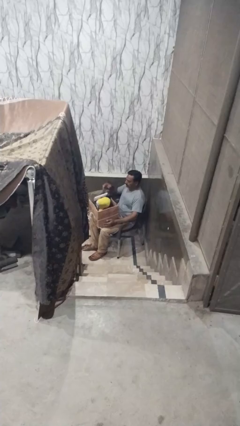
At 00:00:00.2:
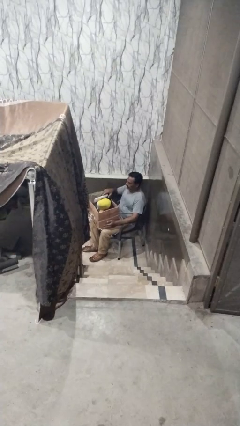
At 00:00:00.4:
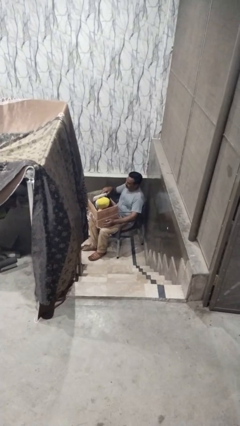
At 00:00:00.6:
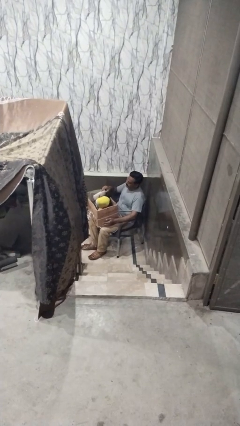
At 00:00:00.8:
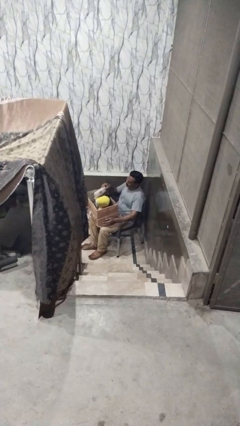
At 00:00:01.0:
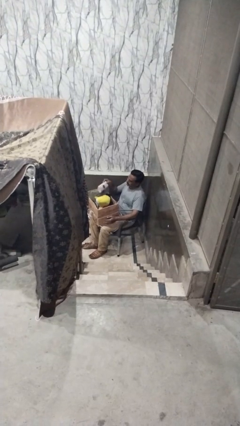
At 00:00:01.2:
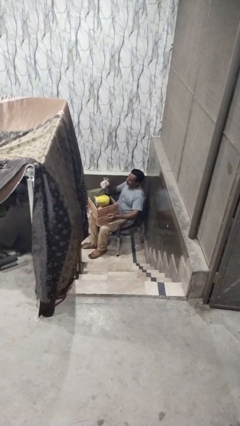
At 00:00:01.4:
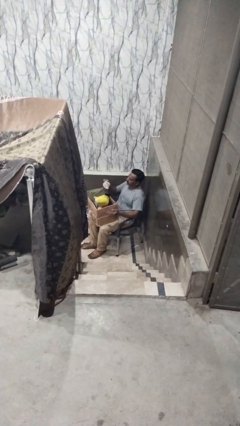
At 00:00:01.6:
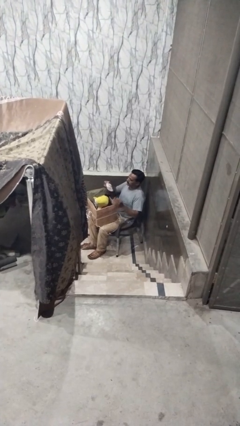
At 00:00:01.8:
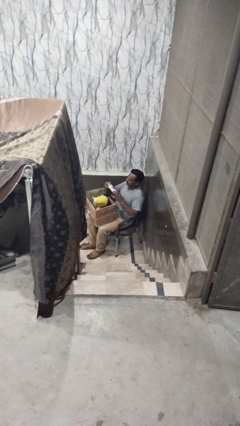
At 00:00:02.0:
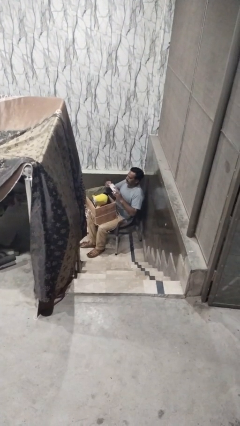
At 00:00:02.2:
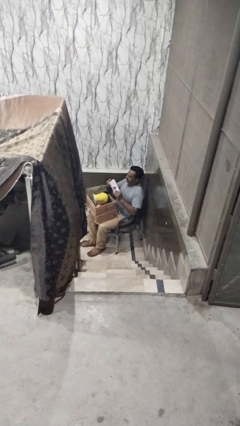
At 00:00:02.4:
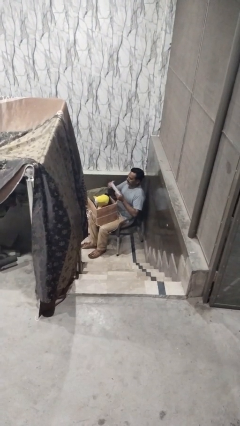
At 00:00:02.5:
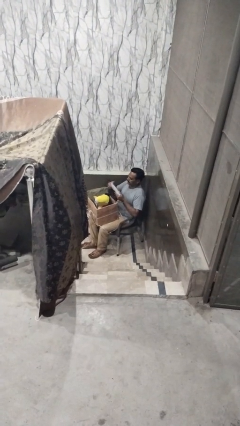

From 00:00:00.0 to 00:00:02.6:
person takes object from box

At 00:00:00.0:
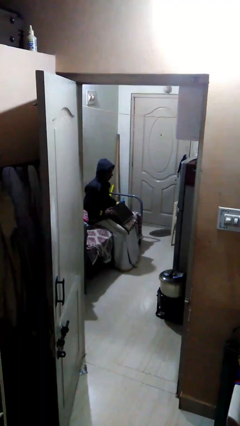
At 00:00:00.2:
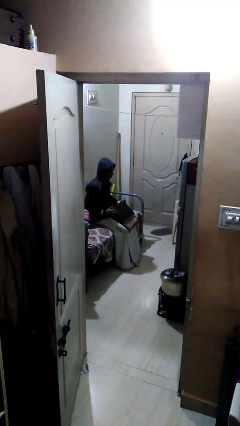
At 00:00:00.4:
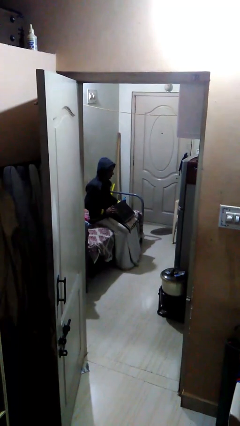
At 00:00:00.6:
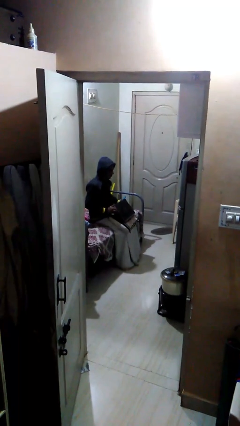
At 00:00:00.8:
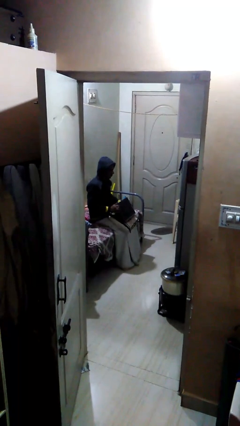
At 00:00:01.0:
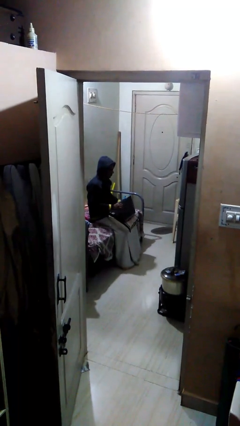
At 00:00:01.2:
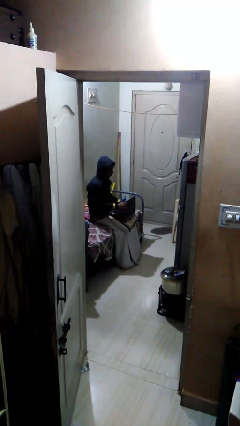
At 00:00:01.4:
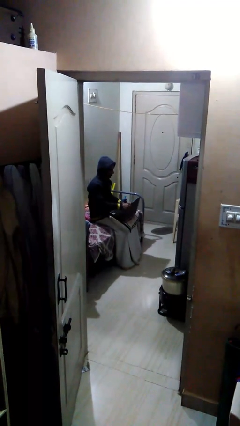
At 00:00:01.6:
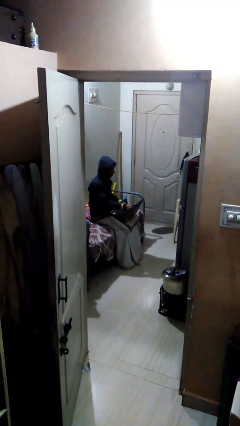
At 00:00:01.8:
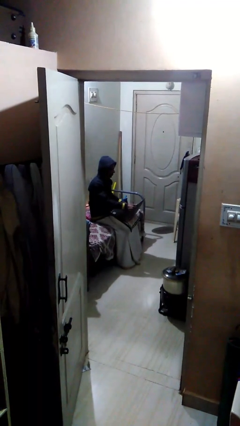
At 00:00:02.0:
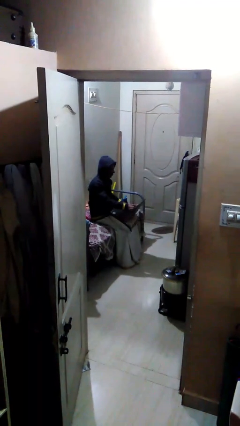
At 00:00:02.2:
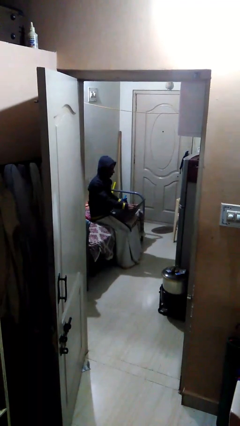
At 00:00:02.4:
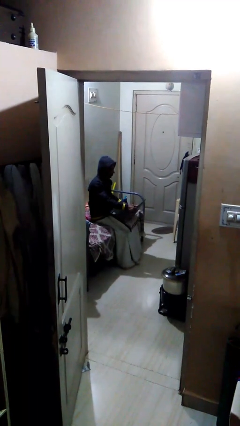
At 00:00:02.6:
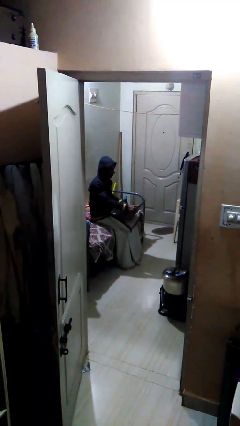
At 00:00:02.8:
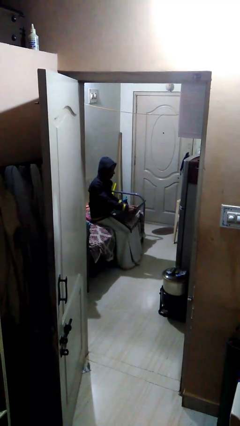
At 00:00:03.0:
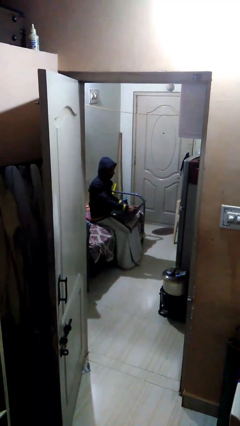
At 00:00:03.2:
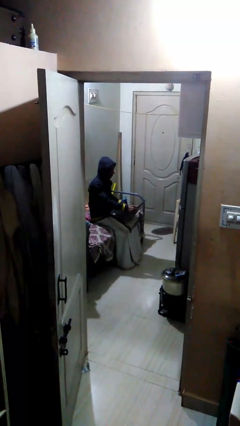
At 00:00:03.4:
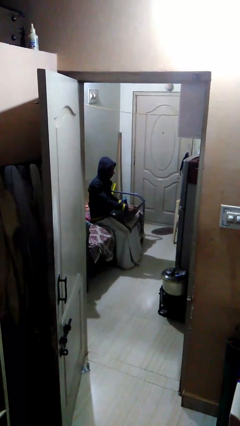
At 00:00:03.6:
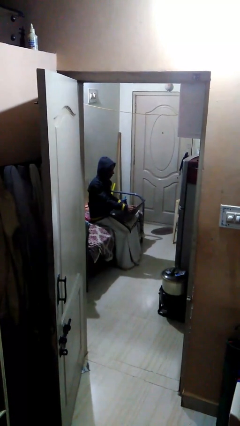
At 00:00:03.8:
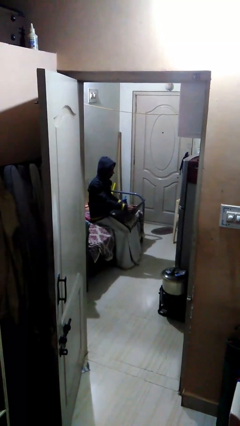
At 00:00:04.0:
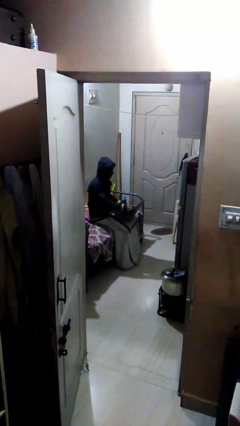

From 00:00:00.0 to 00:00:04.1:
person interacts with laptop

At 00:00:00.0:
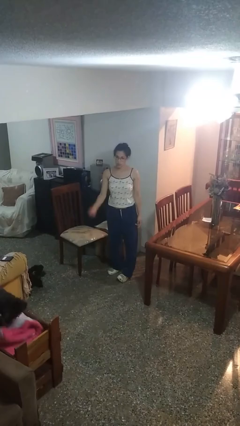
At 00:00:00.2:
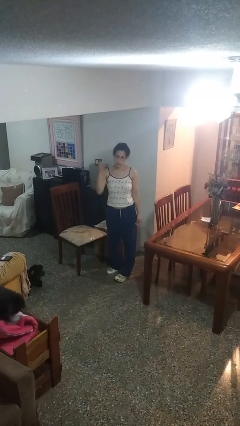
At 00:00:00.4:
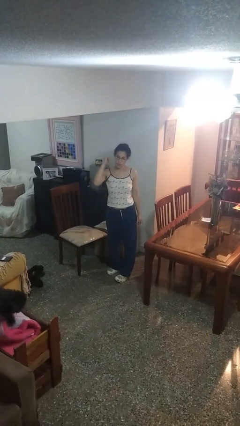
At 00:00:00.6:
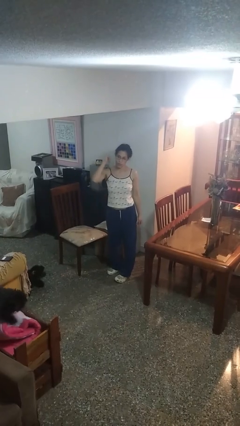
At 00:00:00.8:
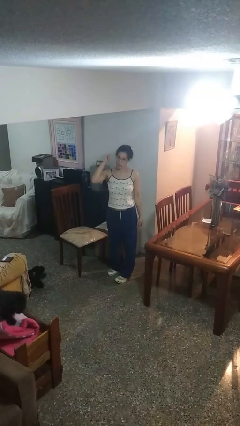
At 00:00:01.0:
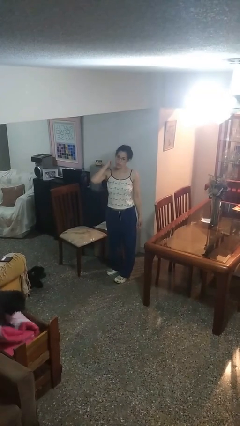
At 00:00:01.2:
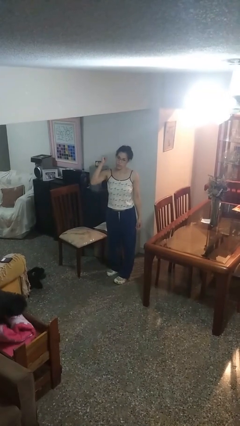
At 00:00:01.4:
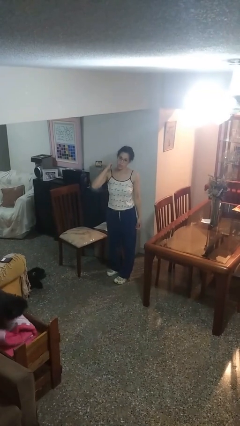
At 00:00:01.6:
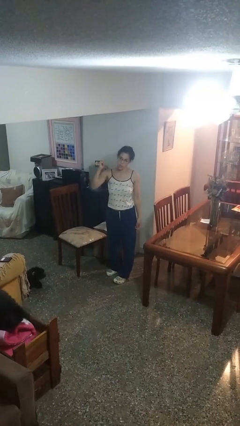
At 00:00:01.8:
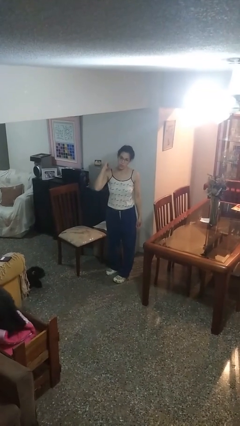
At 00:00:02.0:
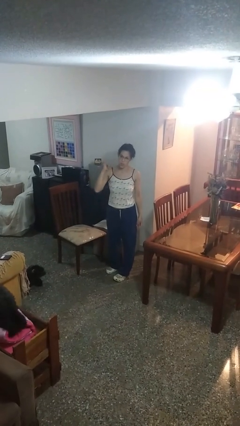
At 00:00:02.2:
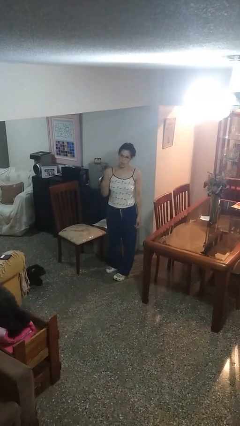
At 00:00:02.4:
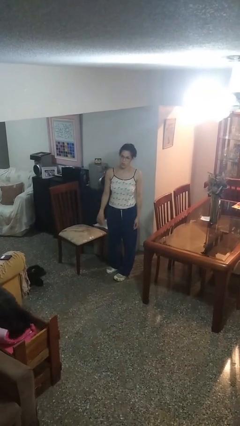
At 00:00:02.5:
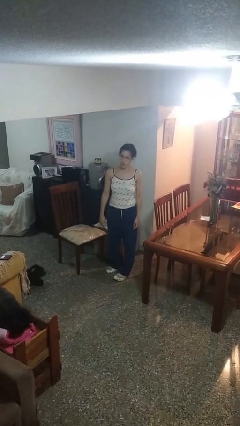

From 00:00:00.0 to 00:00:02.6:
person gestures behind me

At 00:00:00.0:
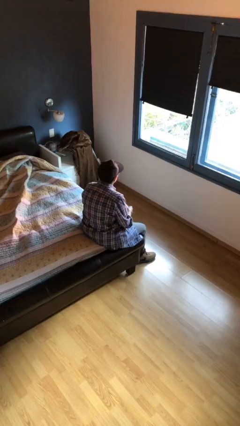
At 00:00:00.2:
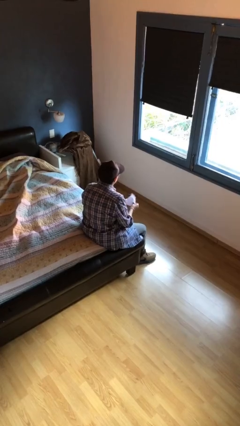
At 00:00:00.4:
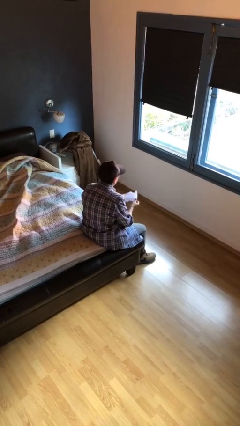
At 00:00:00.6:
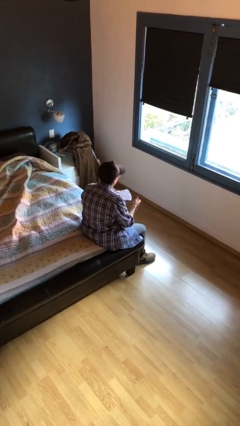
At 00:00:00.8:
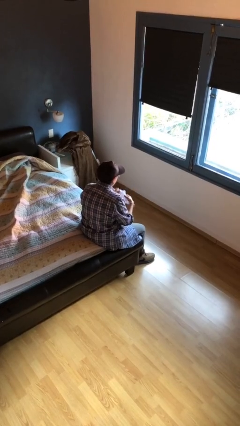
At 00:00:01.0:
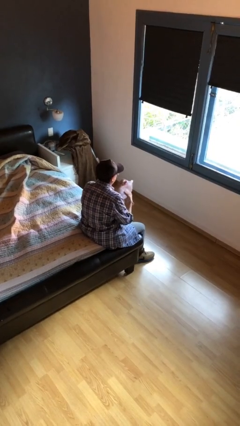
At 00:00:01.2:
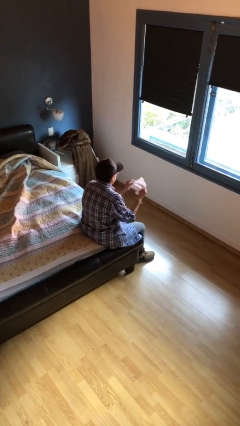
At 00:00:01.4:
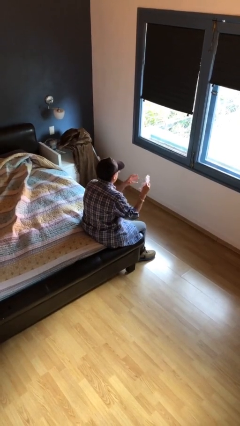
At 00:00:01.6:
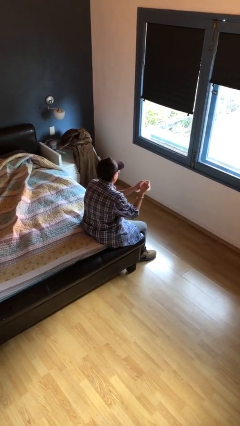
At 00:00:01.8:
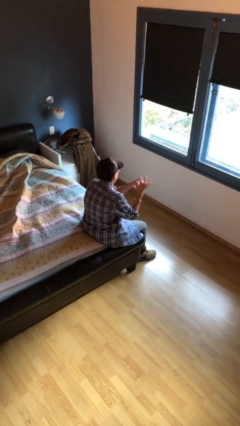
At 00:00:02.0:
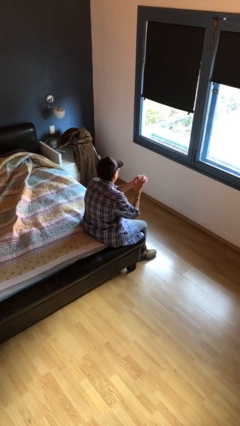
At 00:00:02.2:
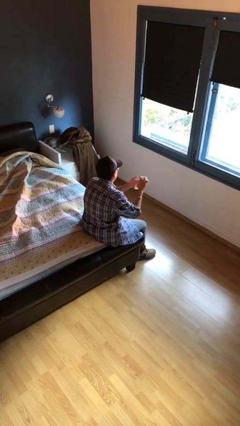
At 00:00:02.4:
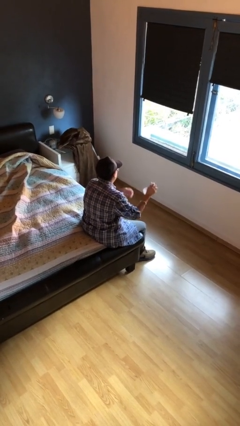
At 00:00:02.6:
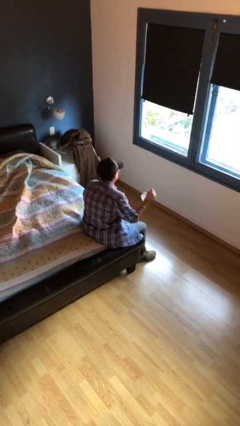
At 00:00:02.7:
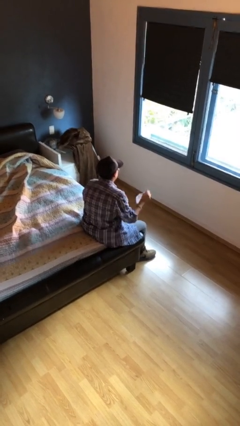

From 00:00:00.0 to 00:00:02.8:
person crumples paper

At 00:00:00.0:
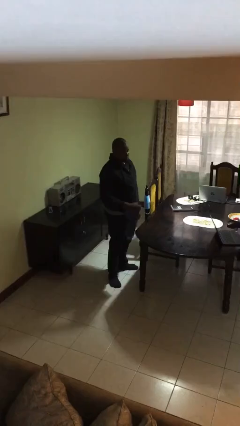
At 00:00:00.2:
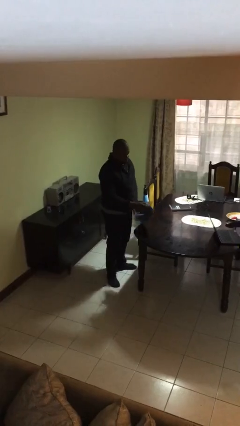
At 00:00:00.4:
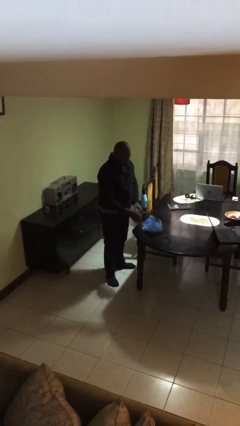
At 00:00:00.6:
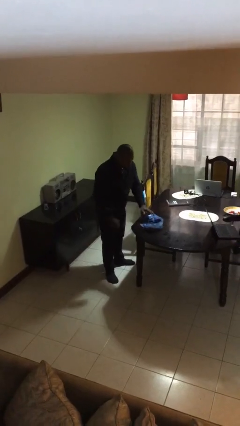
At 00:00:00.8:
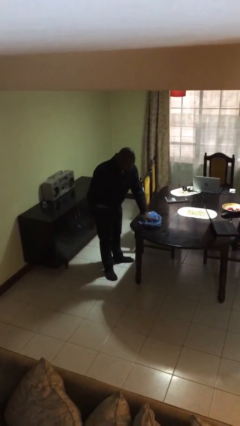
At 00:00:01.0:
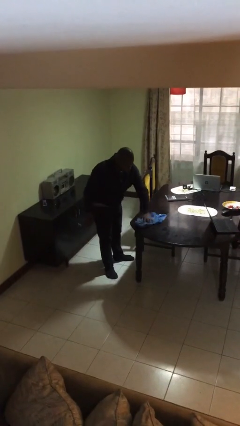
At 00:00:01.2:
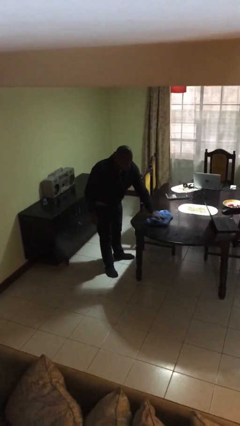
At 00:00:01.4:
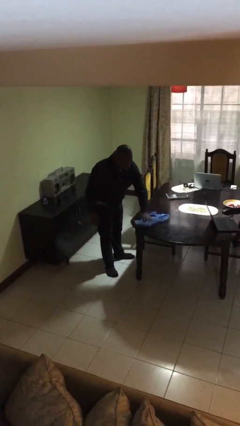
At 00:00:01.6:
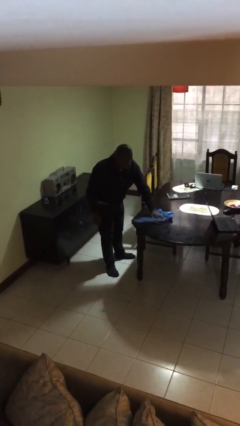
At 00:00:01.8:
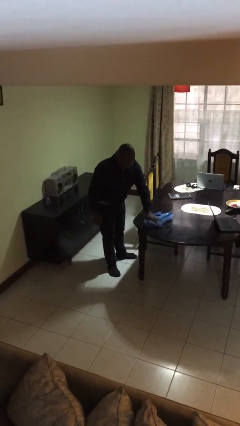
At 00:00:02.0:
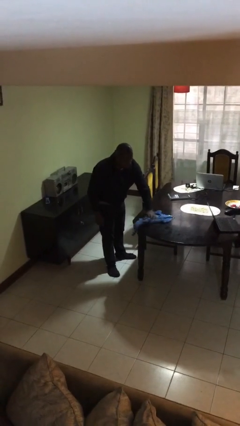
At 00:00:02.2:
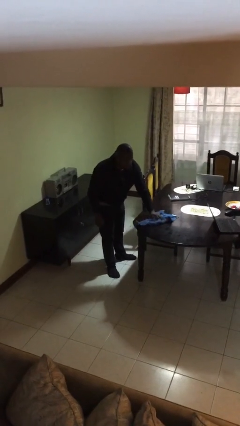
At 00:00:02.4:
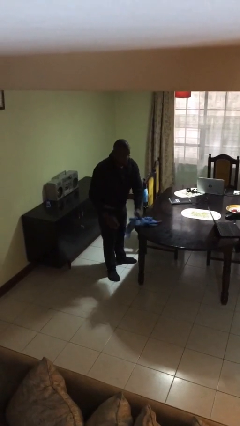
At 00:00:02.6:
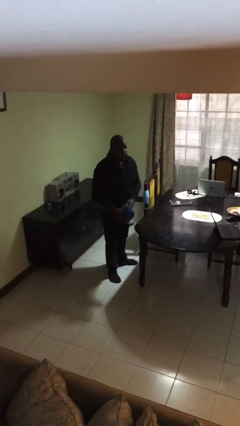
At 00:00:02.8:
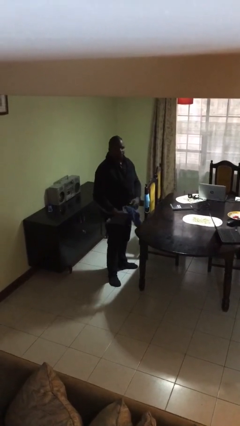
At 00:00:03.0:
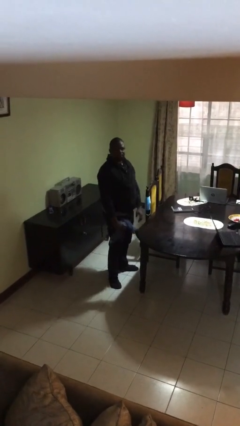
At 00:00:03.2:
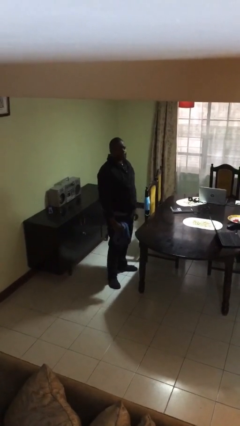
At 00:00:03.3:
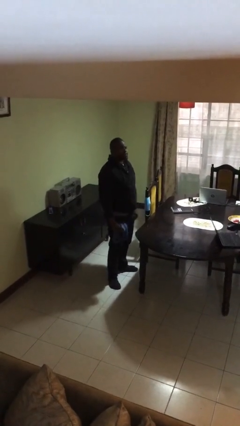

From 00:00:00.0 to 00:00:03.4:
person cleans table with rag

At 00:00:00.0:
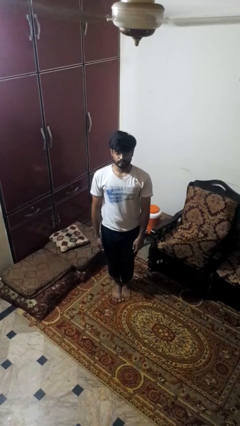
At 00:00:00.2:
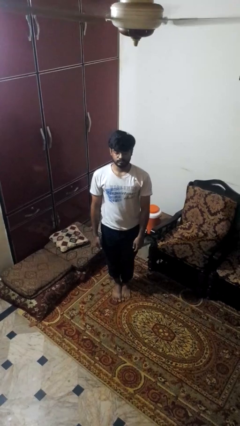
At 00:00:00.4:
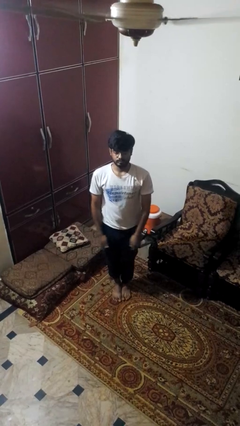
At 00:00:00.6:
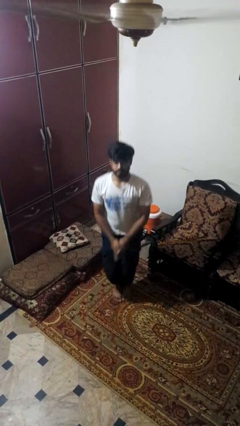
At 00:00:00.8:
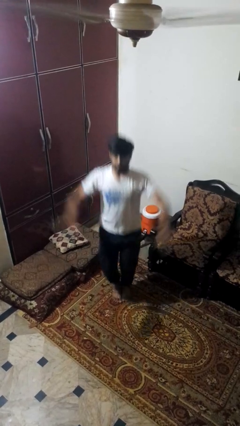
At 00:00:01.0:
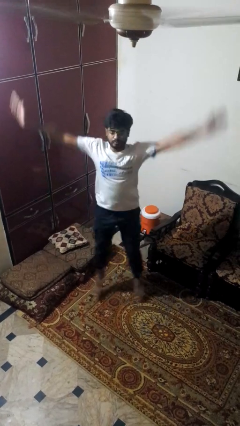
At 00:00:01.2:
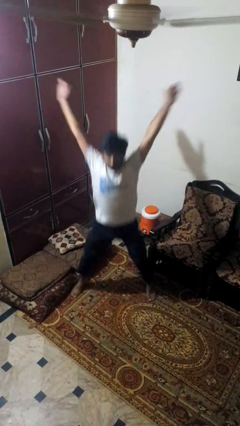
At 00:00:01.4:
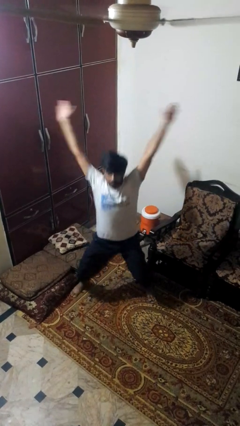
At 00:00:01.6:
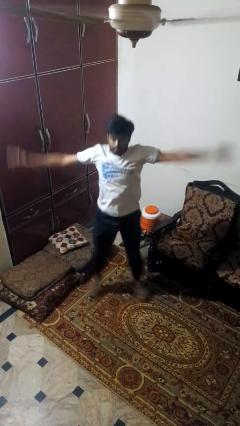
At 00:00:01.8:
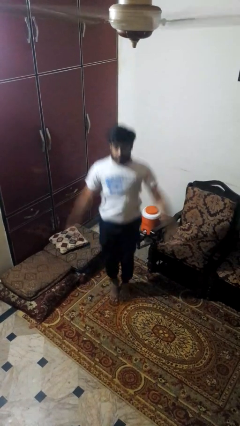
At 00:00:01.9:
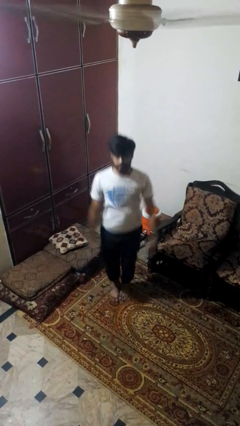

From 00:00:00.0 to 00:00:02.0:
person exercises with jumping jacks
